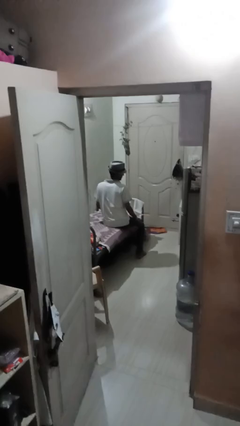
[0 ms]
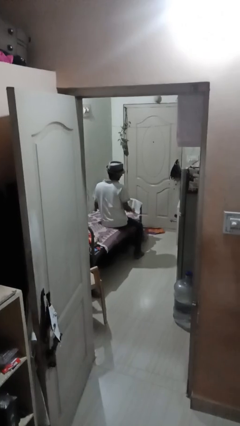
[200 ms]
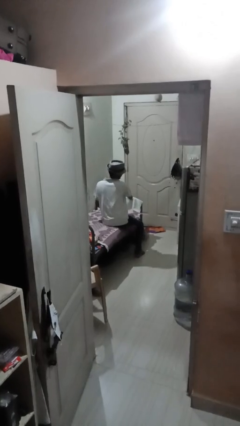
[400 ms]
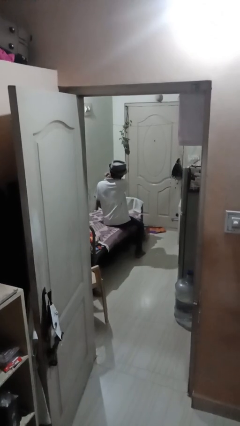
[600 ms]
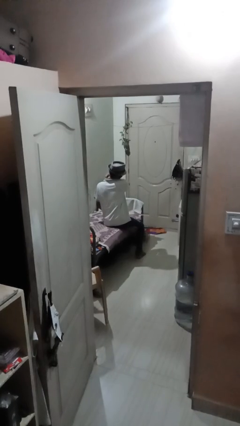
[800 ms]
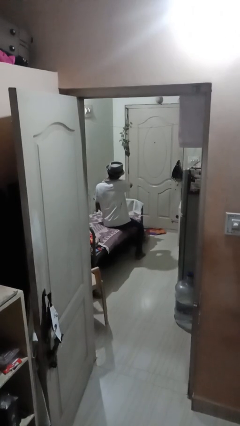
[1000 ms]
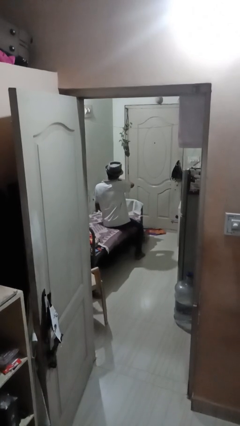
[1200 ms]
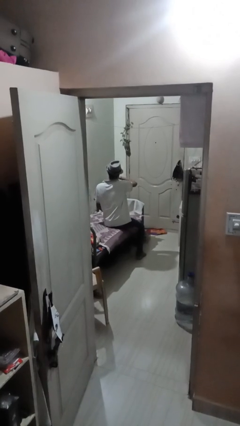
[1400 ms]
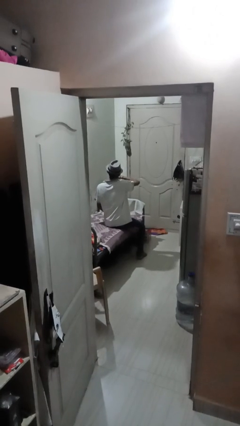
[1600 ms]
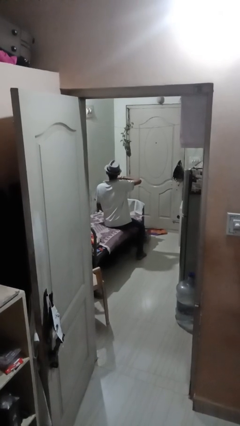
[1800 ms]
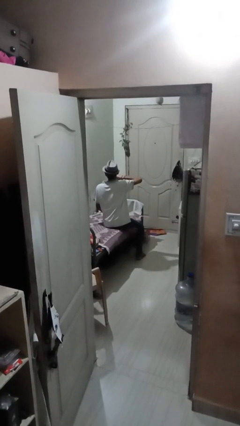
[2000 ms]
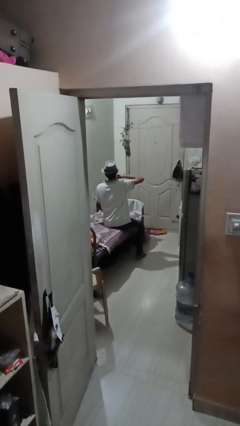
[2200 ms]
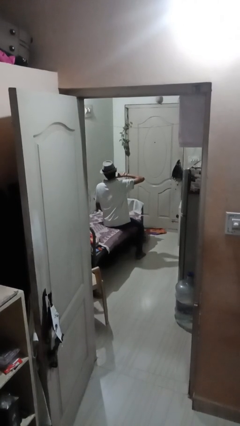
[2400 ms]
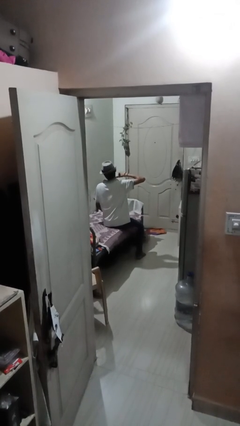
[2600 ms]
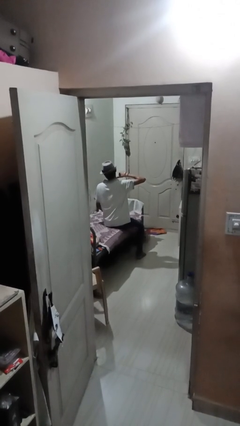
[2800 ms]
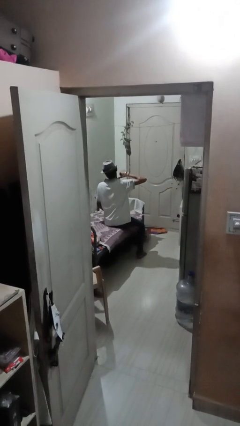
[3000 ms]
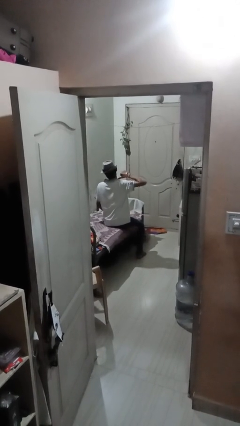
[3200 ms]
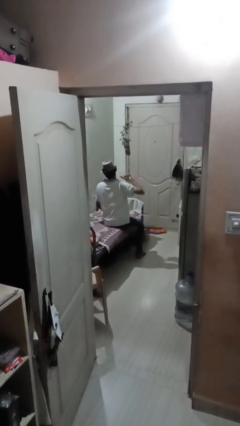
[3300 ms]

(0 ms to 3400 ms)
person gestures cut

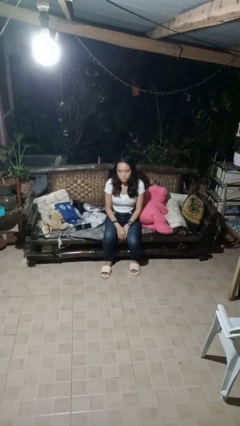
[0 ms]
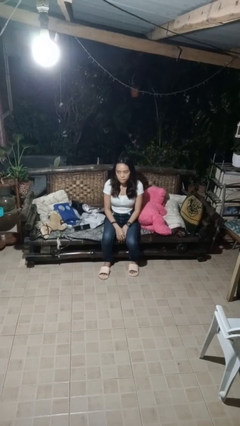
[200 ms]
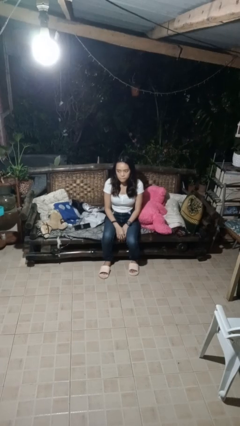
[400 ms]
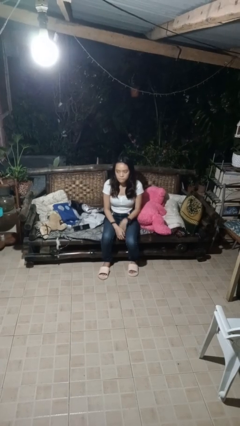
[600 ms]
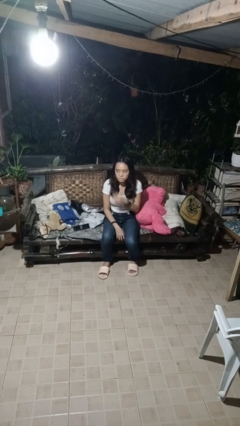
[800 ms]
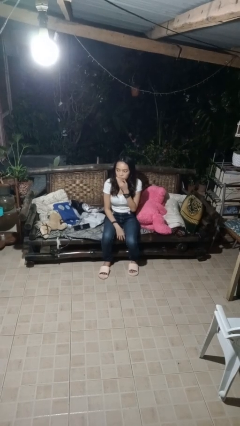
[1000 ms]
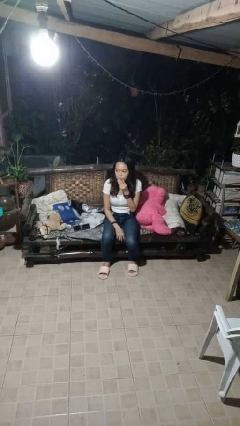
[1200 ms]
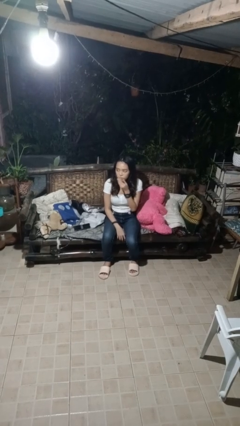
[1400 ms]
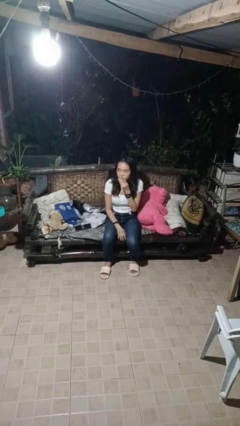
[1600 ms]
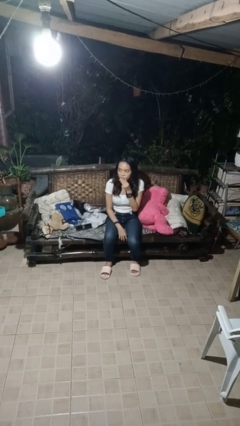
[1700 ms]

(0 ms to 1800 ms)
person strokes chin

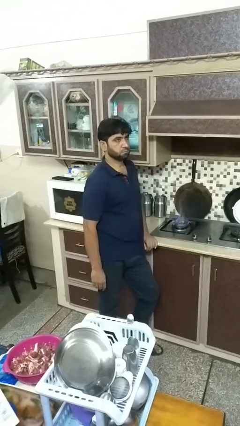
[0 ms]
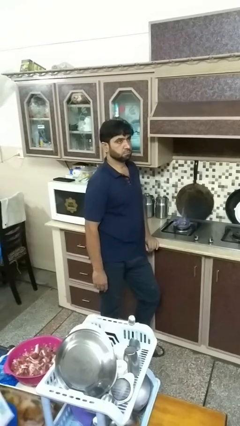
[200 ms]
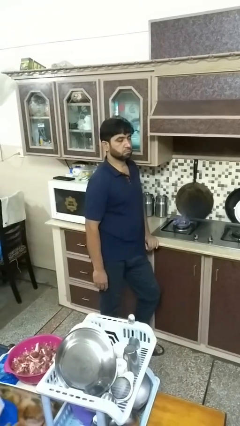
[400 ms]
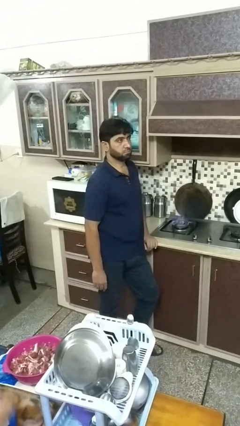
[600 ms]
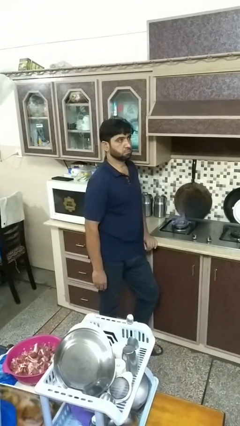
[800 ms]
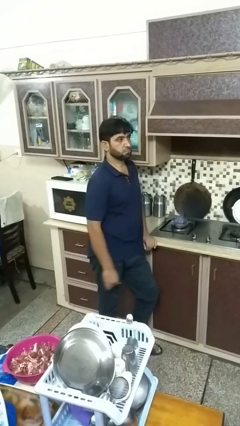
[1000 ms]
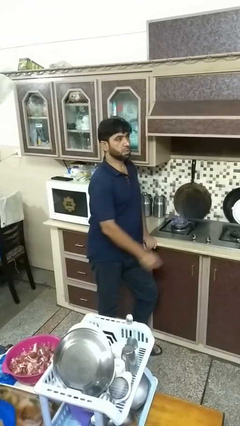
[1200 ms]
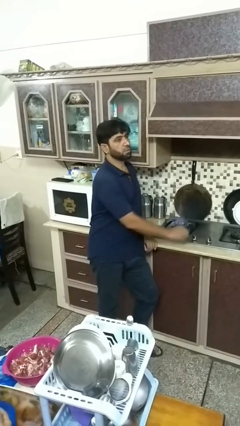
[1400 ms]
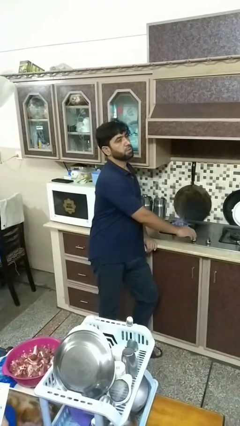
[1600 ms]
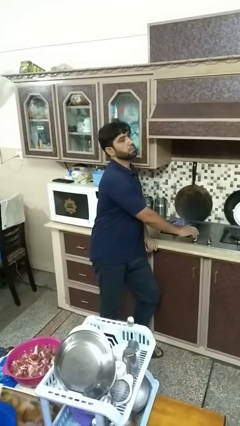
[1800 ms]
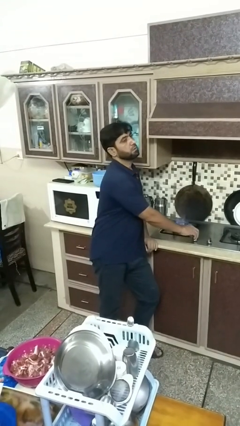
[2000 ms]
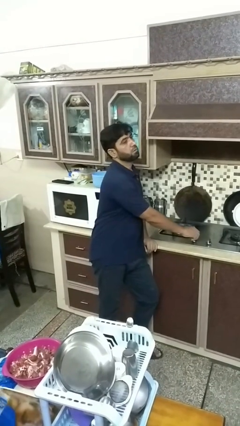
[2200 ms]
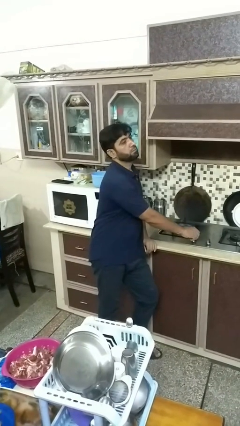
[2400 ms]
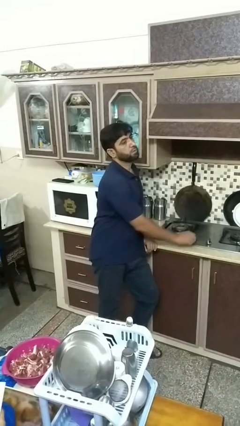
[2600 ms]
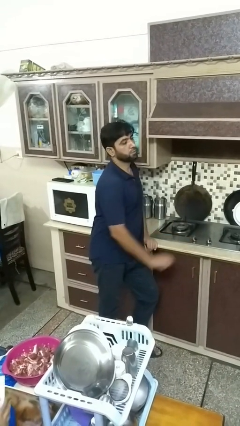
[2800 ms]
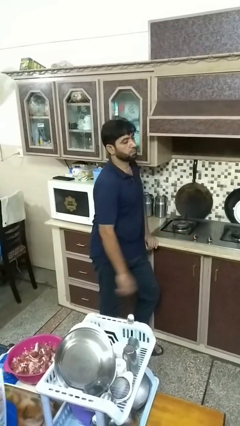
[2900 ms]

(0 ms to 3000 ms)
person turns off stovetop

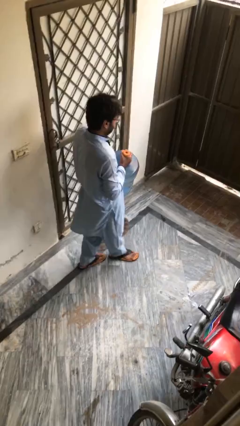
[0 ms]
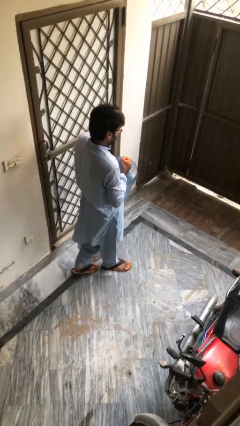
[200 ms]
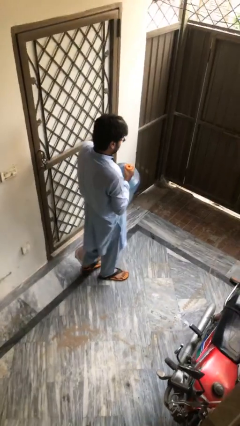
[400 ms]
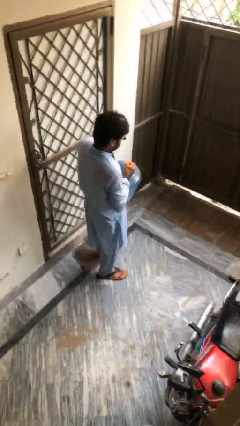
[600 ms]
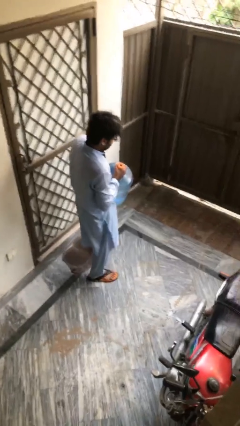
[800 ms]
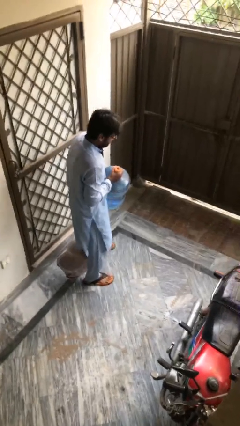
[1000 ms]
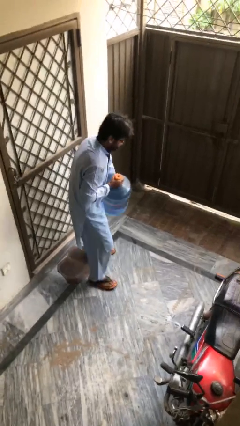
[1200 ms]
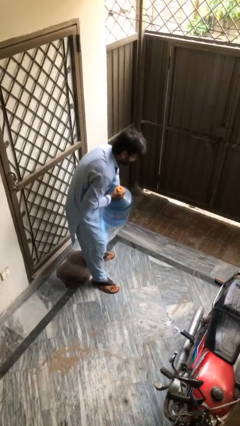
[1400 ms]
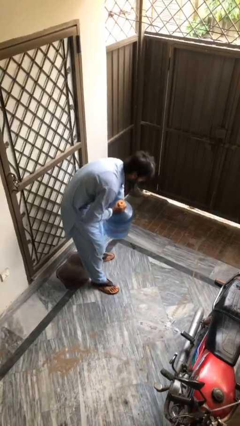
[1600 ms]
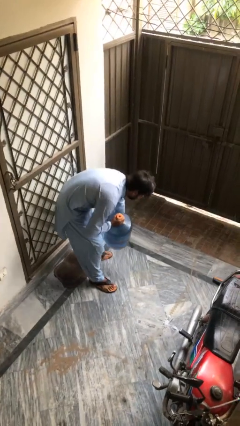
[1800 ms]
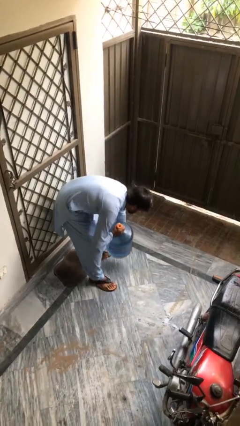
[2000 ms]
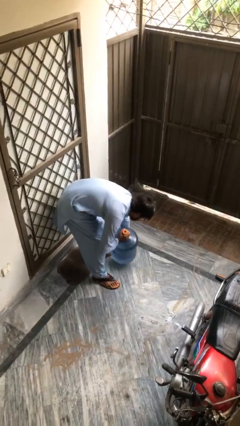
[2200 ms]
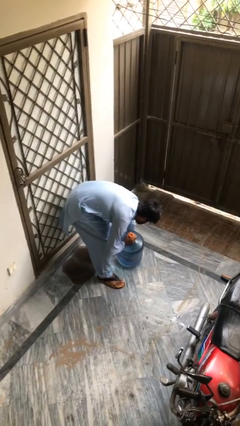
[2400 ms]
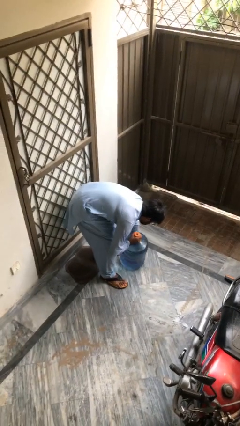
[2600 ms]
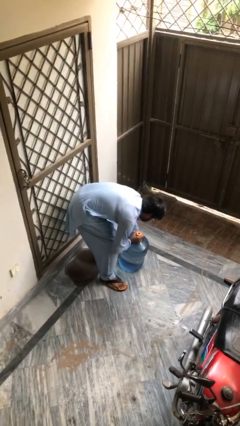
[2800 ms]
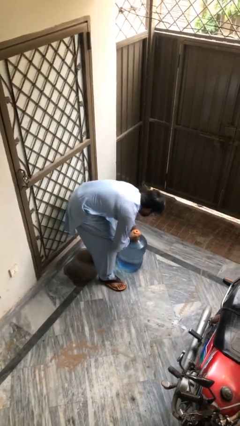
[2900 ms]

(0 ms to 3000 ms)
person puts down object on floor

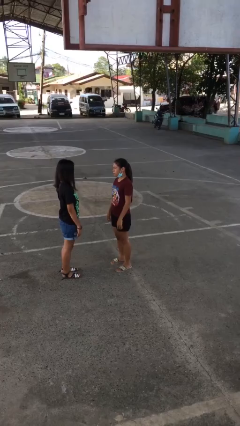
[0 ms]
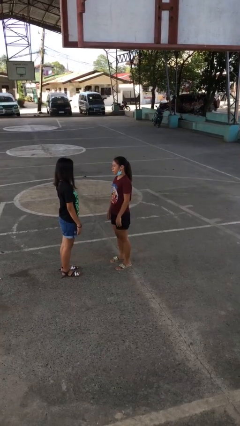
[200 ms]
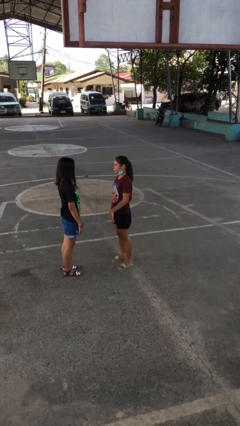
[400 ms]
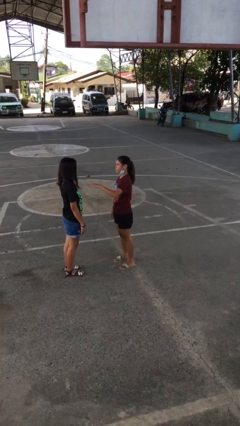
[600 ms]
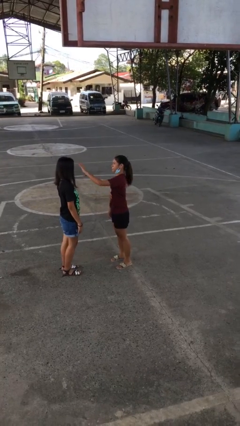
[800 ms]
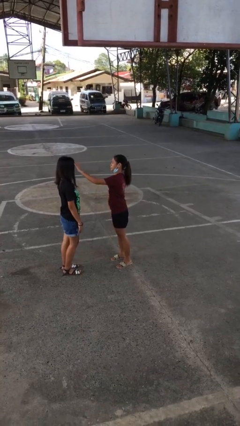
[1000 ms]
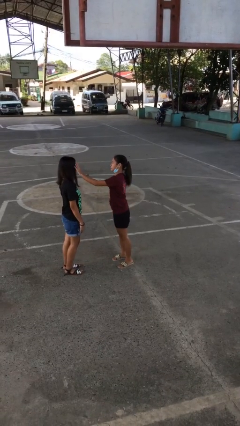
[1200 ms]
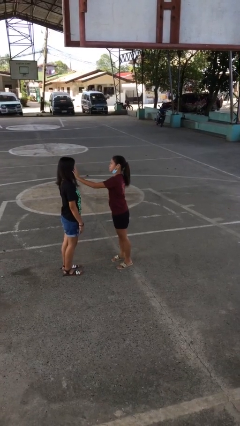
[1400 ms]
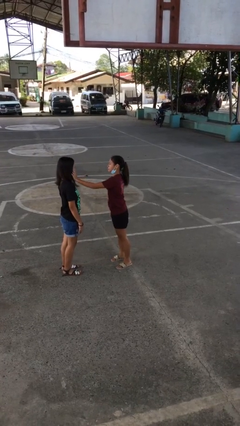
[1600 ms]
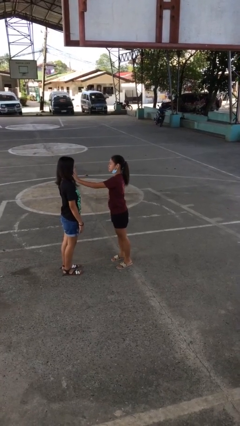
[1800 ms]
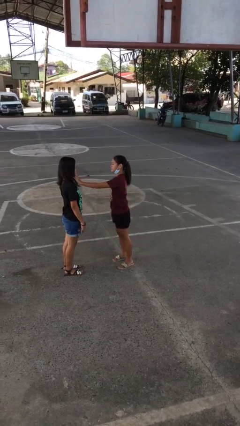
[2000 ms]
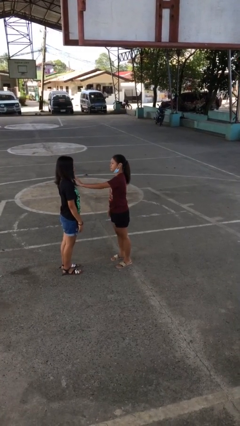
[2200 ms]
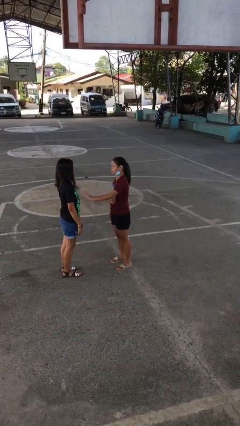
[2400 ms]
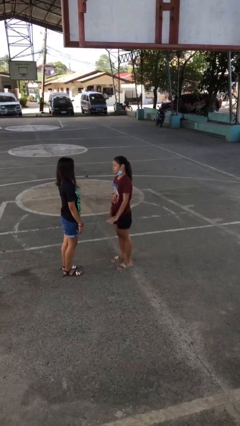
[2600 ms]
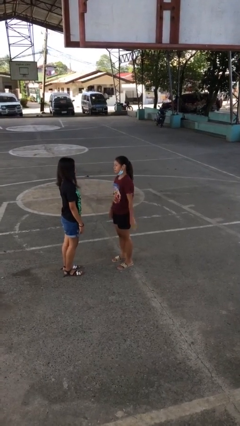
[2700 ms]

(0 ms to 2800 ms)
person touches face of person

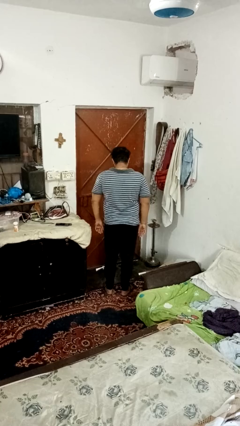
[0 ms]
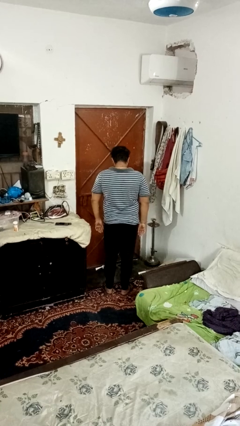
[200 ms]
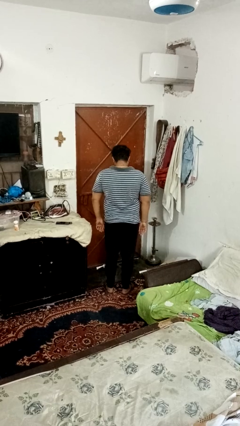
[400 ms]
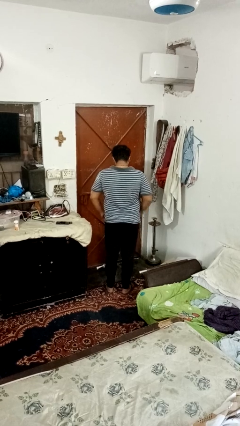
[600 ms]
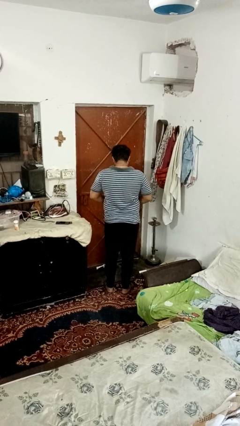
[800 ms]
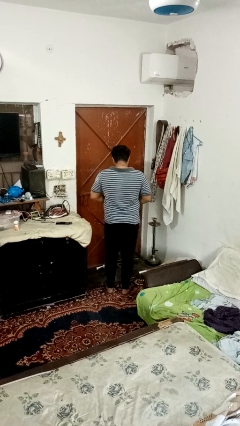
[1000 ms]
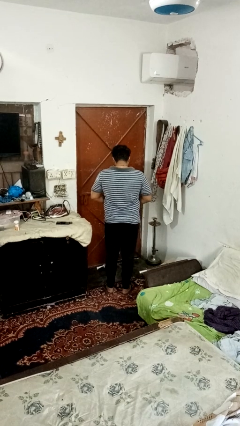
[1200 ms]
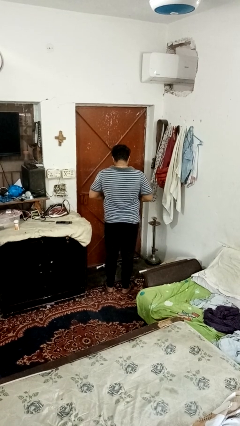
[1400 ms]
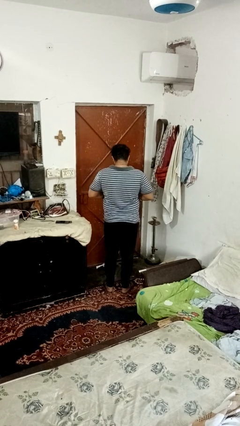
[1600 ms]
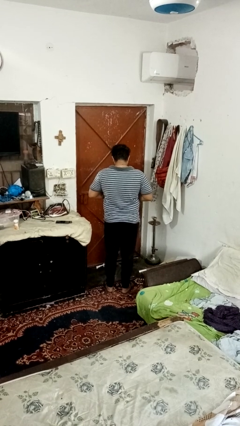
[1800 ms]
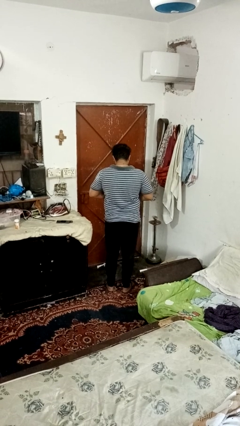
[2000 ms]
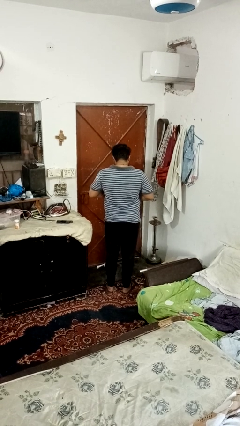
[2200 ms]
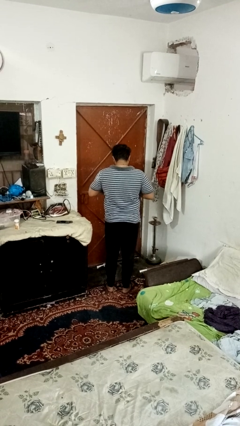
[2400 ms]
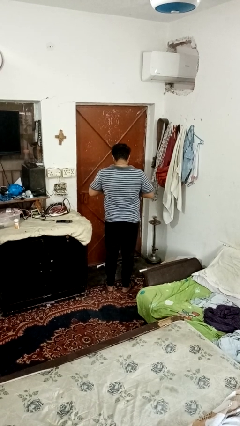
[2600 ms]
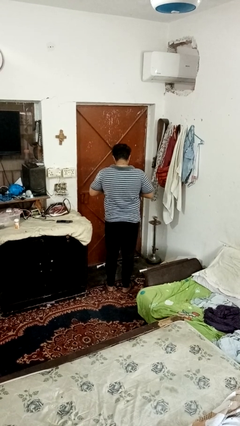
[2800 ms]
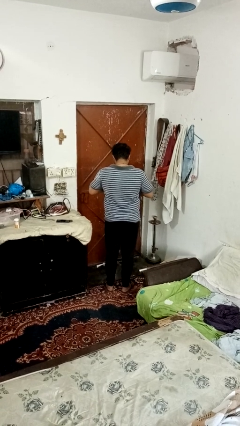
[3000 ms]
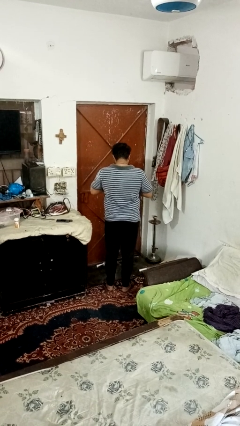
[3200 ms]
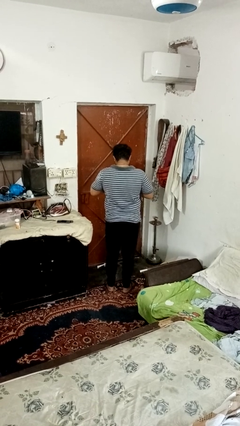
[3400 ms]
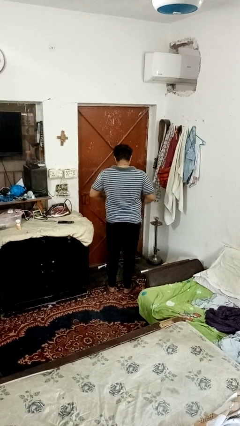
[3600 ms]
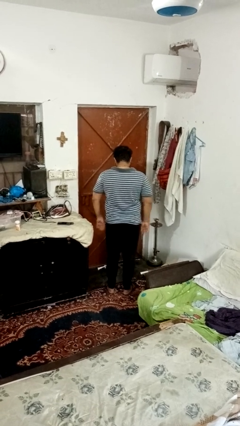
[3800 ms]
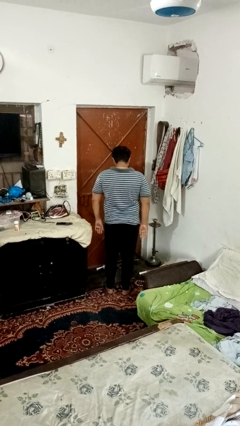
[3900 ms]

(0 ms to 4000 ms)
person buttons shirt
